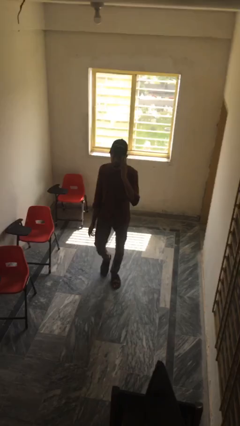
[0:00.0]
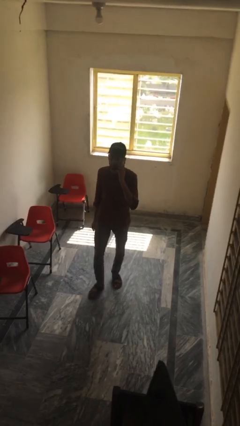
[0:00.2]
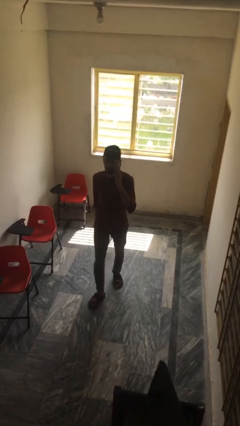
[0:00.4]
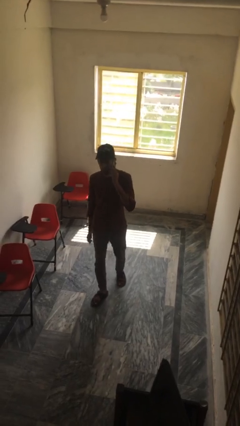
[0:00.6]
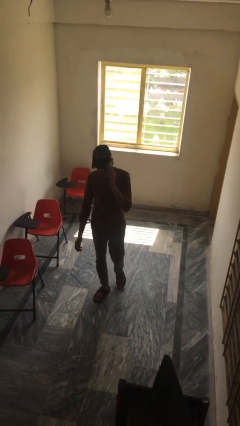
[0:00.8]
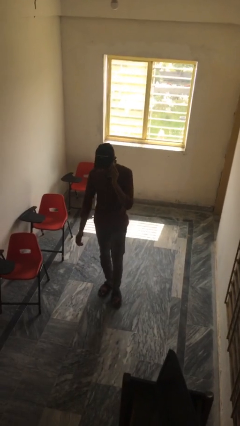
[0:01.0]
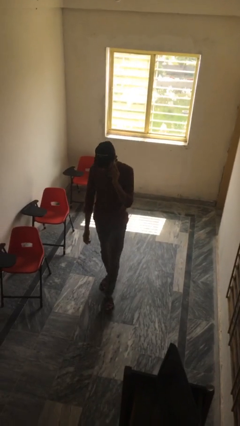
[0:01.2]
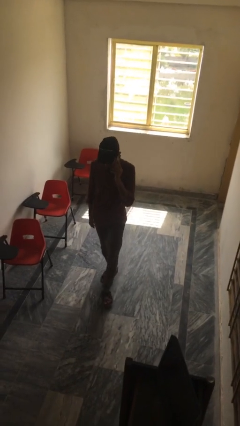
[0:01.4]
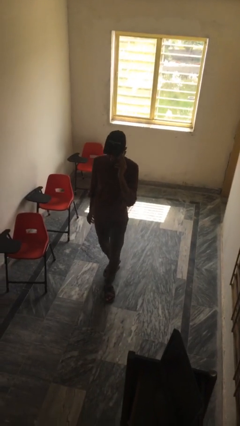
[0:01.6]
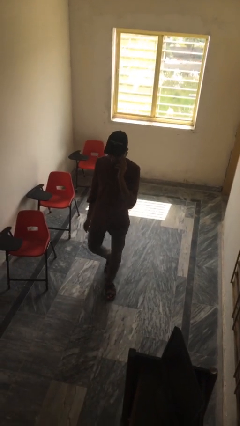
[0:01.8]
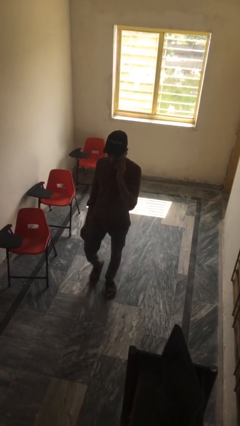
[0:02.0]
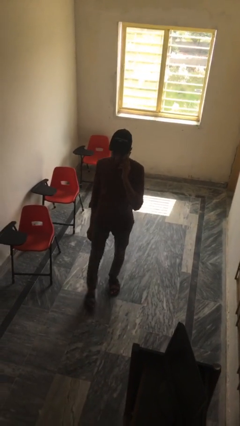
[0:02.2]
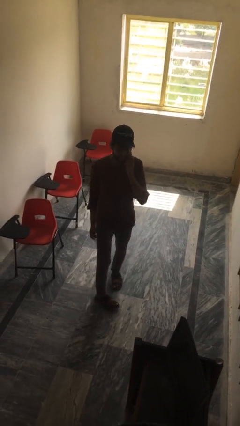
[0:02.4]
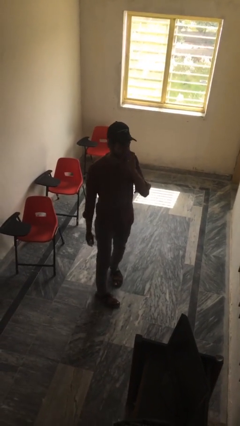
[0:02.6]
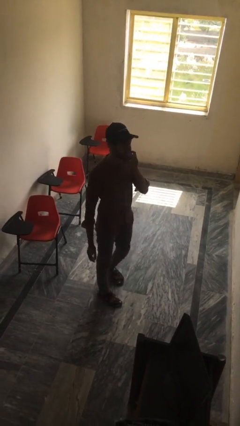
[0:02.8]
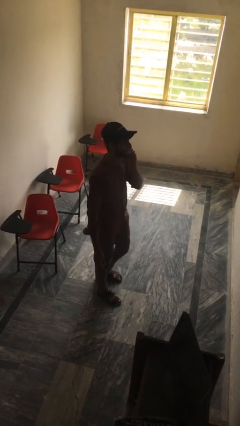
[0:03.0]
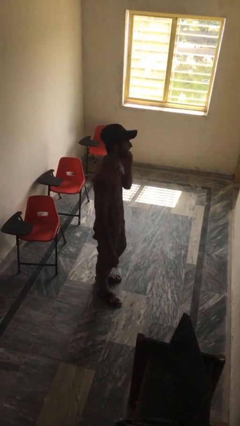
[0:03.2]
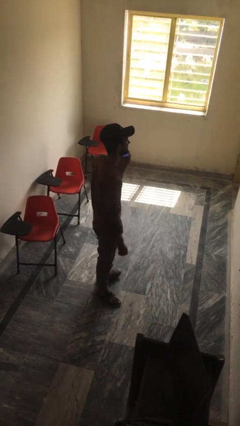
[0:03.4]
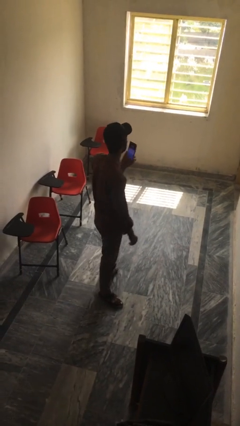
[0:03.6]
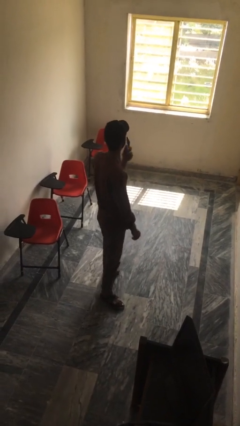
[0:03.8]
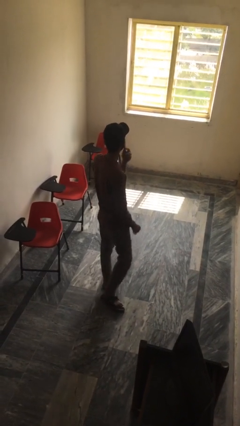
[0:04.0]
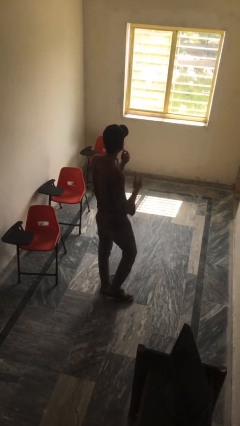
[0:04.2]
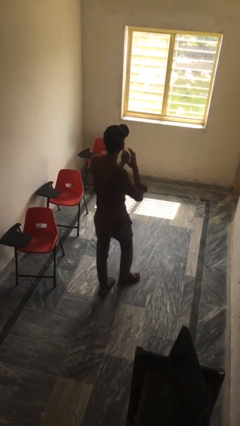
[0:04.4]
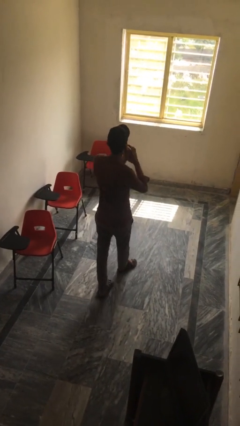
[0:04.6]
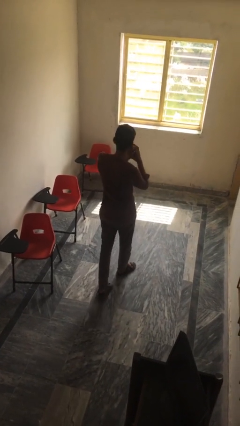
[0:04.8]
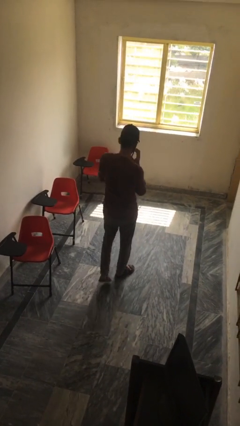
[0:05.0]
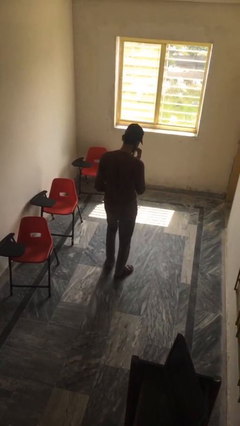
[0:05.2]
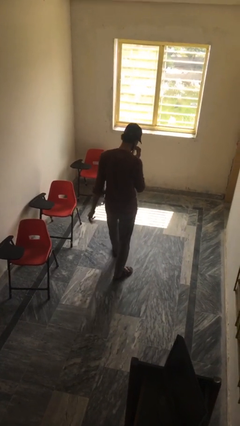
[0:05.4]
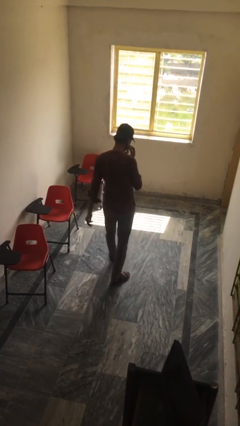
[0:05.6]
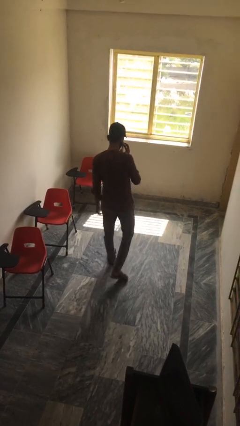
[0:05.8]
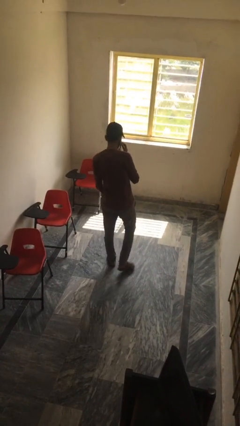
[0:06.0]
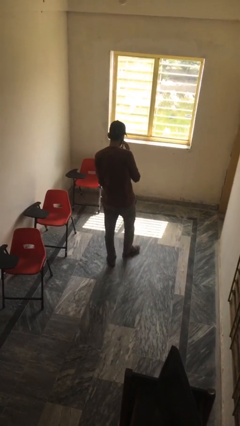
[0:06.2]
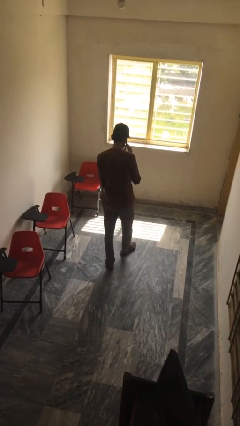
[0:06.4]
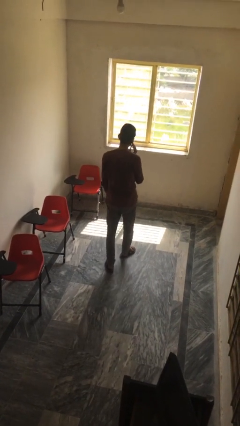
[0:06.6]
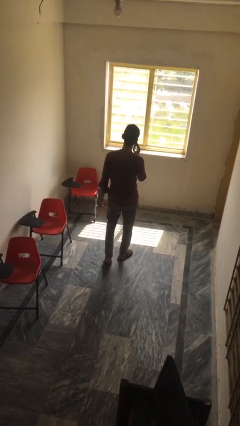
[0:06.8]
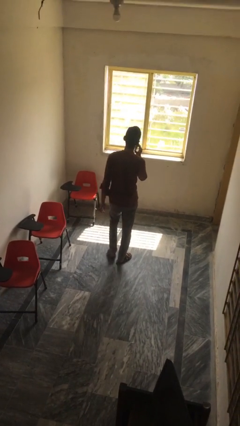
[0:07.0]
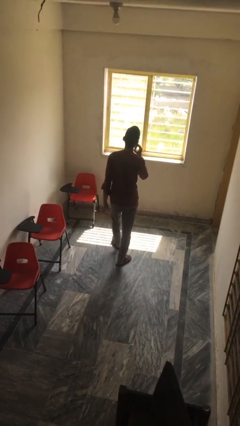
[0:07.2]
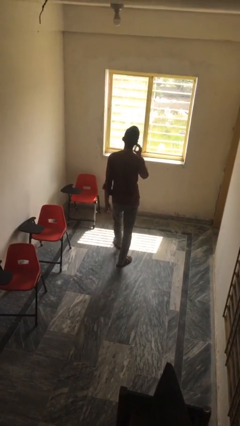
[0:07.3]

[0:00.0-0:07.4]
person talks on phone

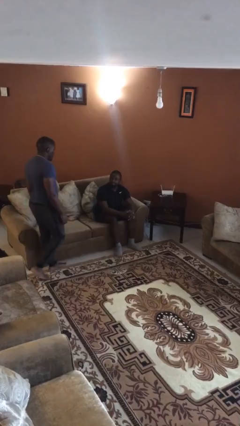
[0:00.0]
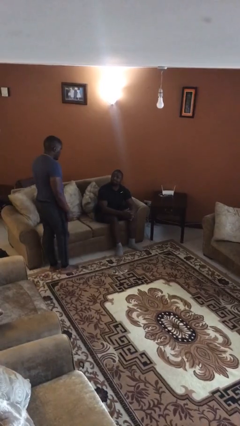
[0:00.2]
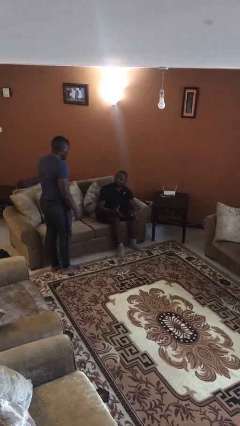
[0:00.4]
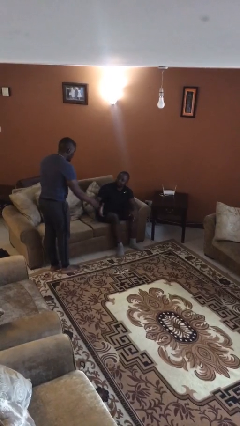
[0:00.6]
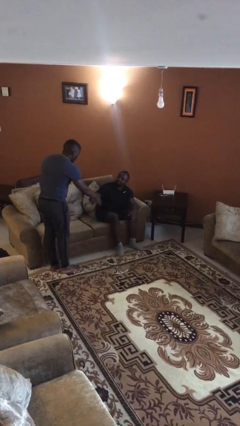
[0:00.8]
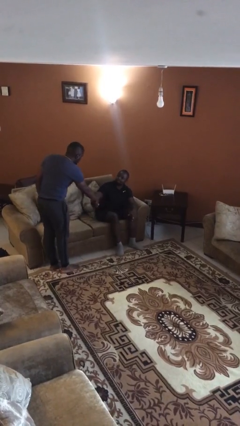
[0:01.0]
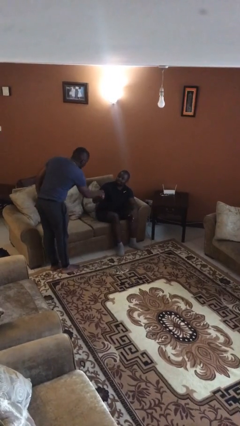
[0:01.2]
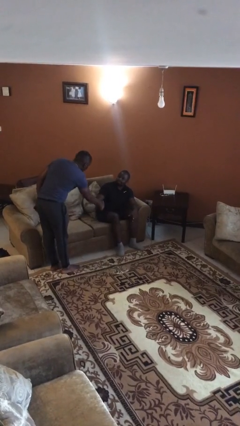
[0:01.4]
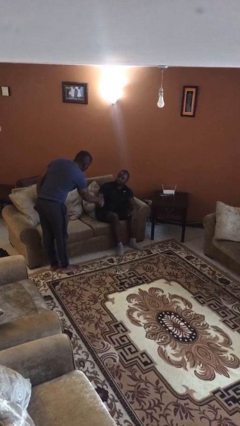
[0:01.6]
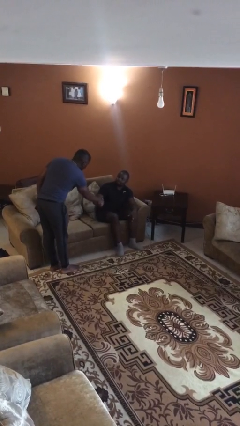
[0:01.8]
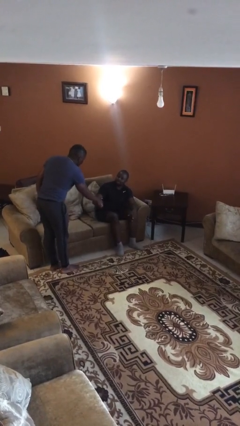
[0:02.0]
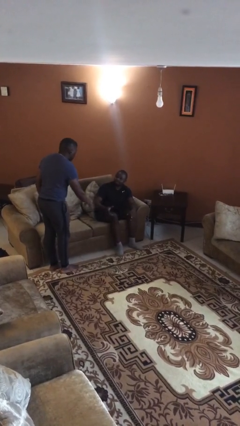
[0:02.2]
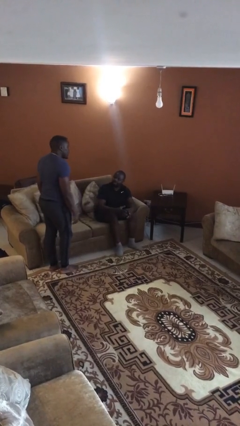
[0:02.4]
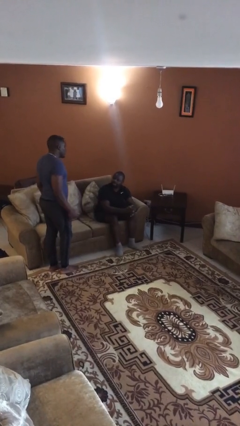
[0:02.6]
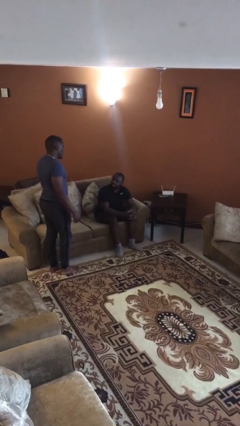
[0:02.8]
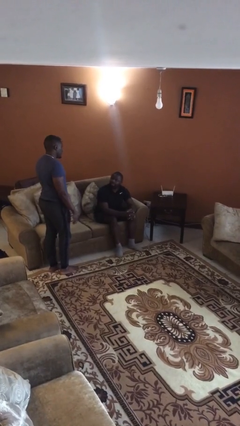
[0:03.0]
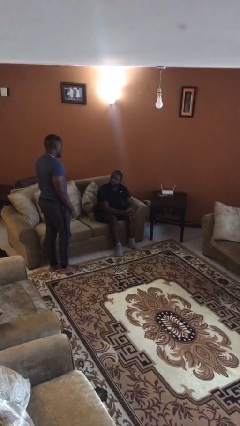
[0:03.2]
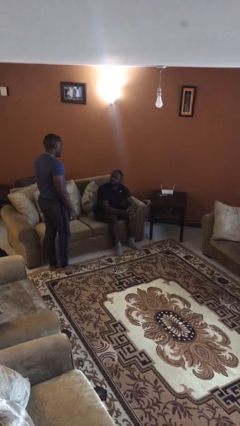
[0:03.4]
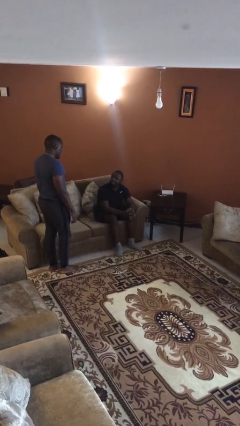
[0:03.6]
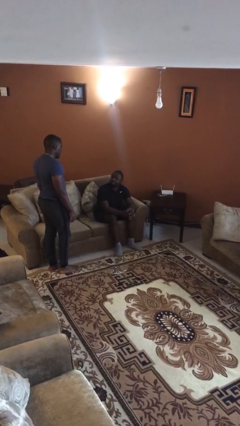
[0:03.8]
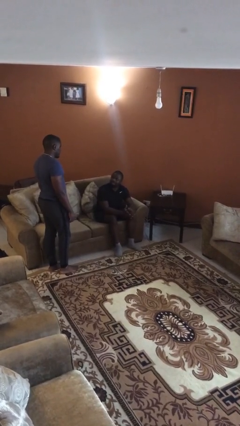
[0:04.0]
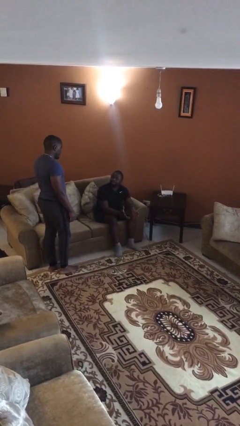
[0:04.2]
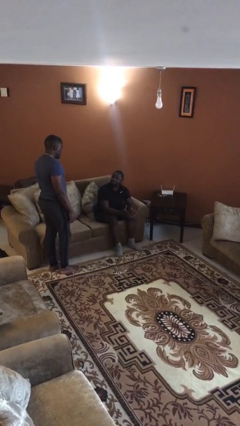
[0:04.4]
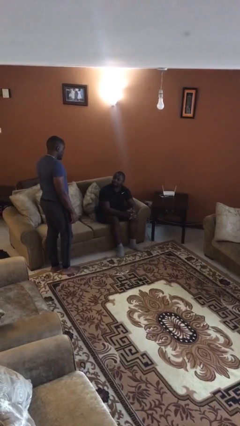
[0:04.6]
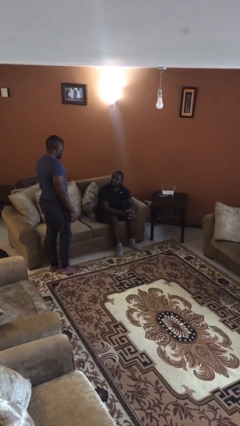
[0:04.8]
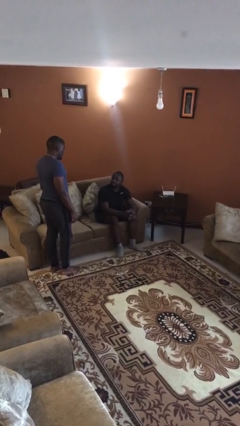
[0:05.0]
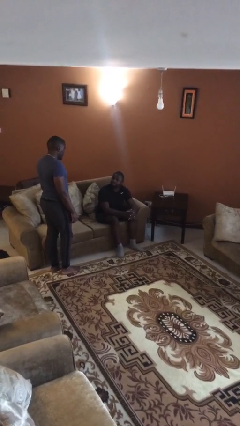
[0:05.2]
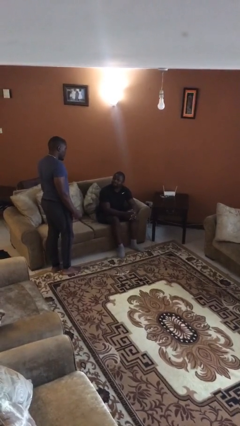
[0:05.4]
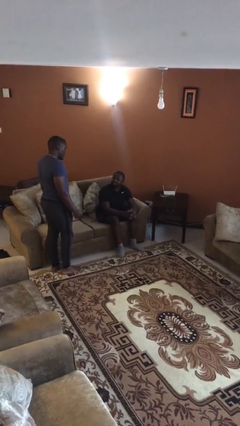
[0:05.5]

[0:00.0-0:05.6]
person shakes hand

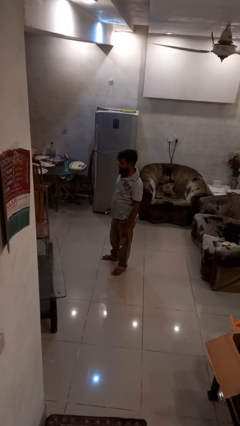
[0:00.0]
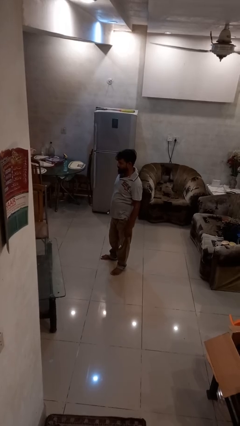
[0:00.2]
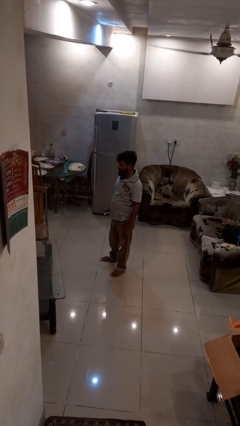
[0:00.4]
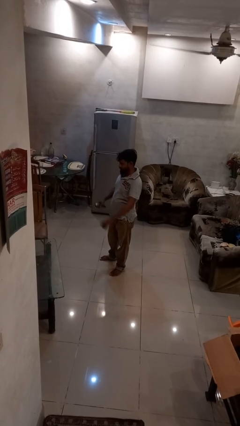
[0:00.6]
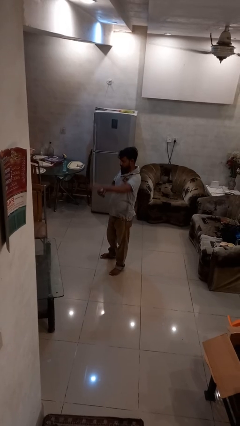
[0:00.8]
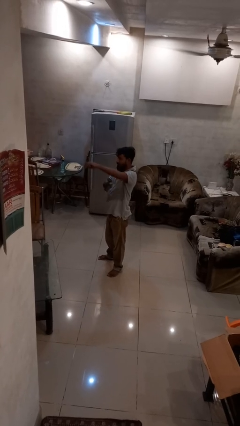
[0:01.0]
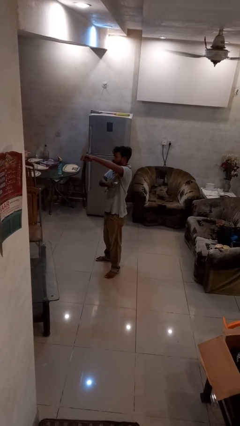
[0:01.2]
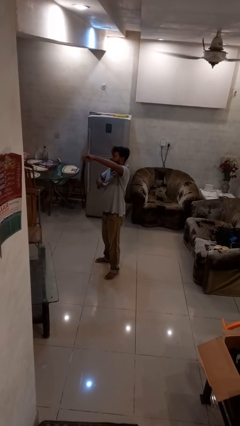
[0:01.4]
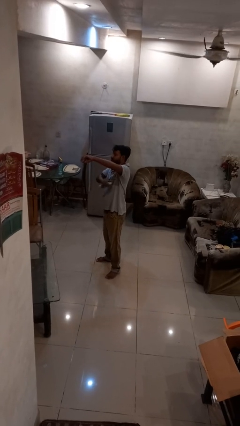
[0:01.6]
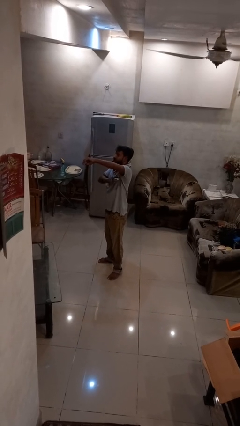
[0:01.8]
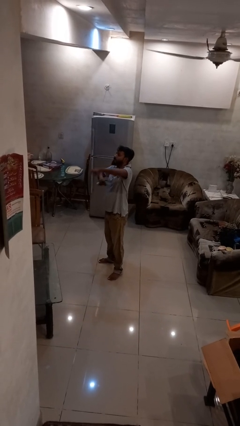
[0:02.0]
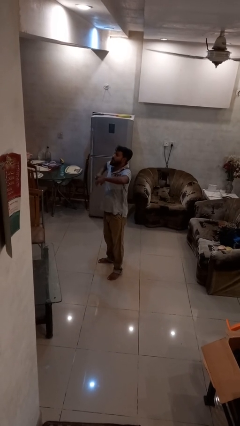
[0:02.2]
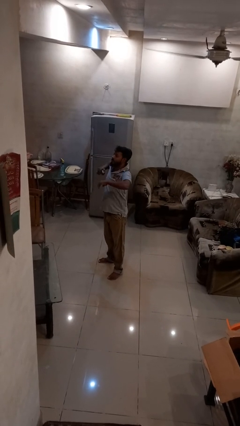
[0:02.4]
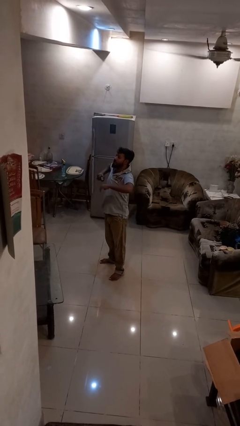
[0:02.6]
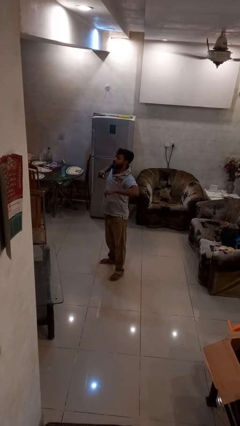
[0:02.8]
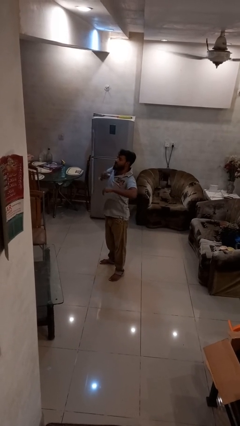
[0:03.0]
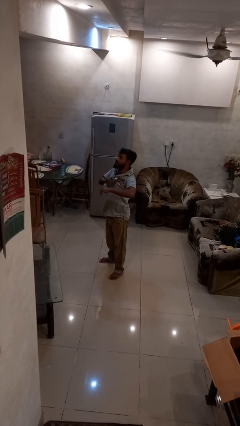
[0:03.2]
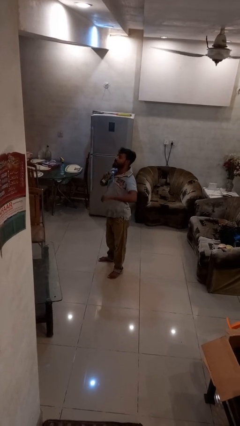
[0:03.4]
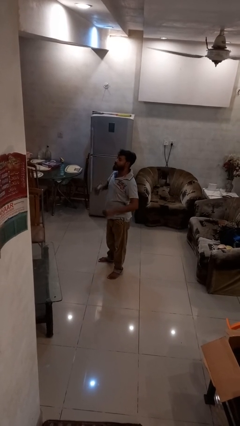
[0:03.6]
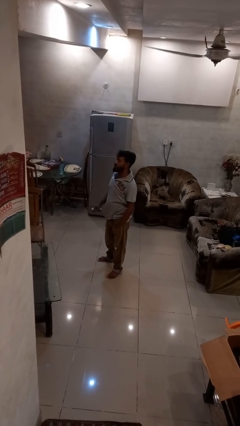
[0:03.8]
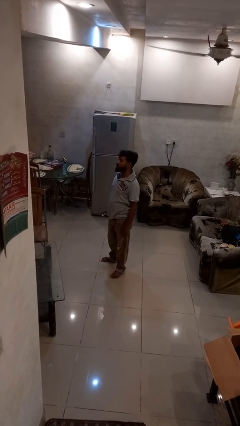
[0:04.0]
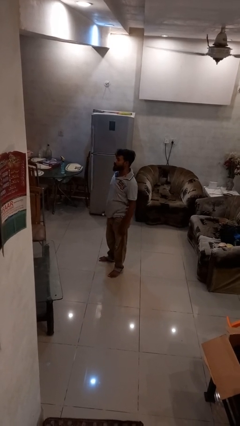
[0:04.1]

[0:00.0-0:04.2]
person applies deodorant

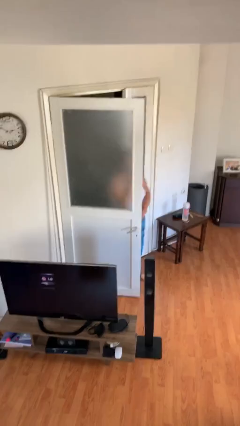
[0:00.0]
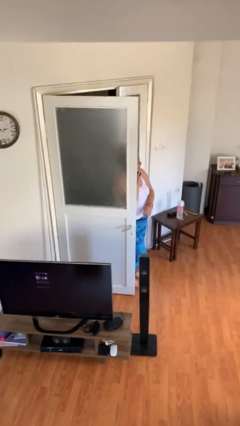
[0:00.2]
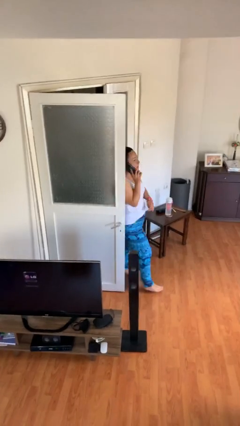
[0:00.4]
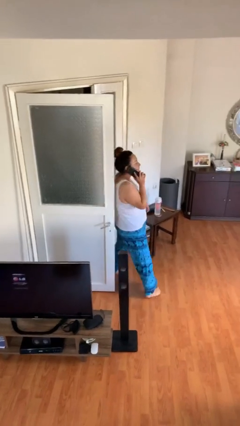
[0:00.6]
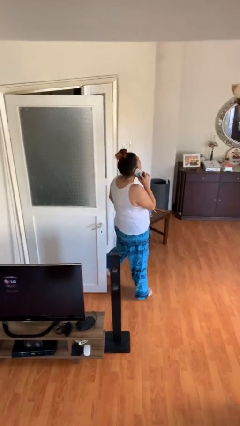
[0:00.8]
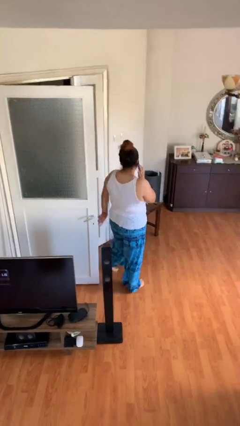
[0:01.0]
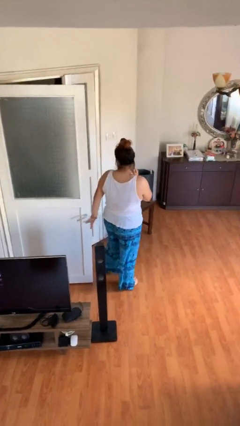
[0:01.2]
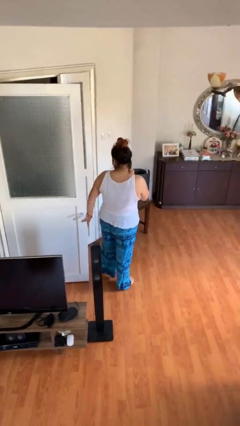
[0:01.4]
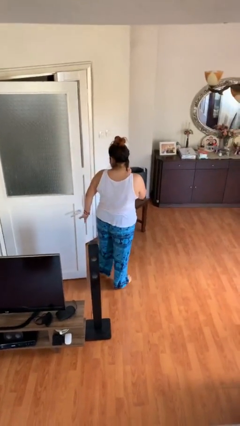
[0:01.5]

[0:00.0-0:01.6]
person enters scene through structure
